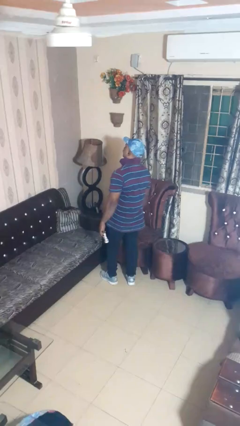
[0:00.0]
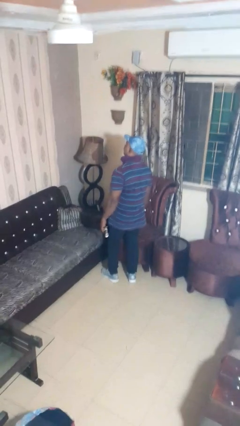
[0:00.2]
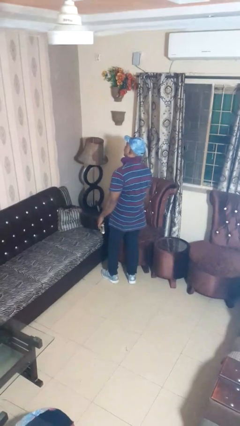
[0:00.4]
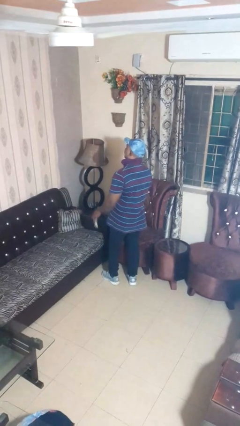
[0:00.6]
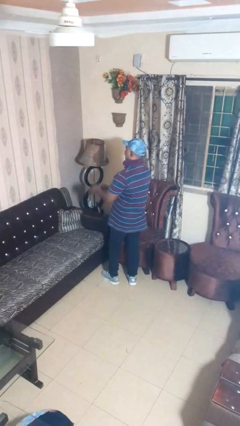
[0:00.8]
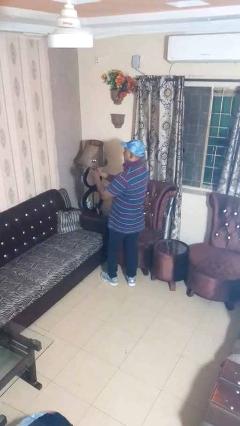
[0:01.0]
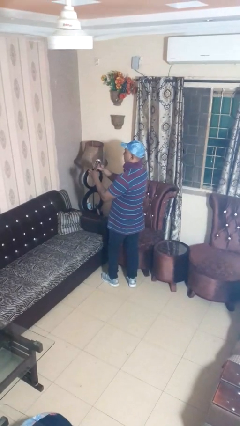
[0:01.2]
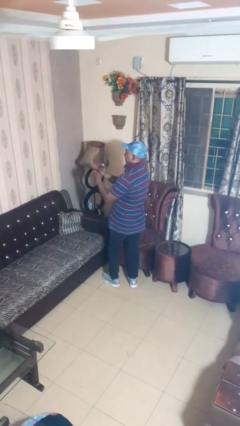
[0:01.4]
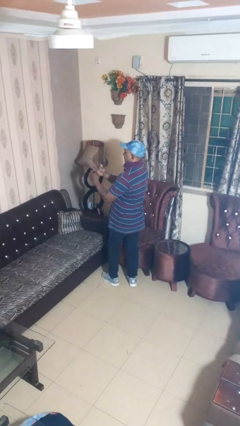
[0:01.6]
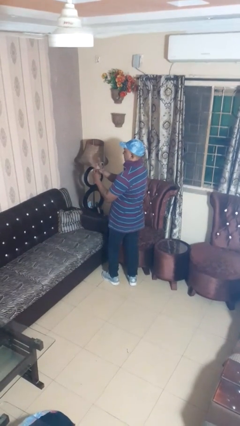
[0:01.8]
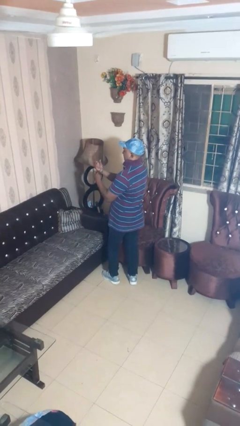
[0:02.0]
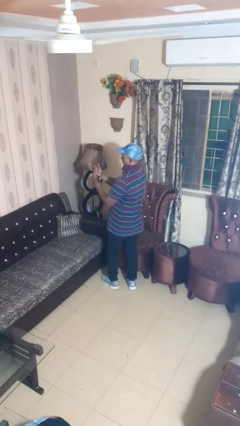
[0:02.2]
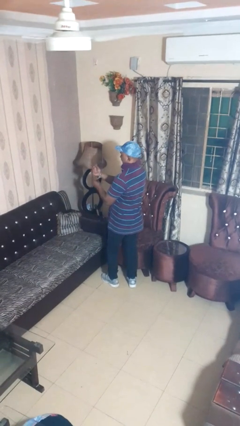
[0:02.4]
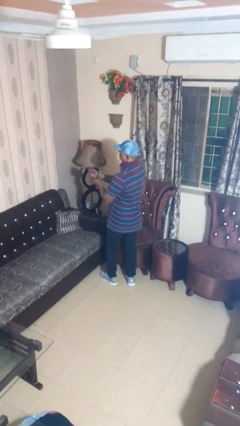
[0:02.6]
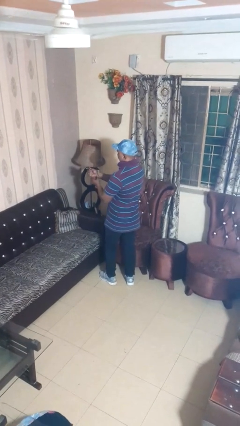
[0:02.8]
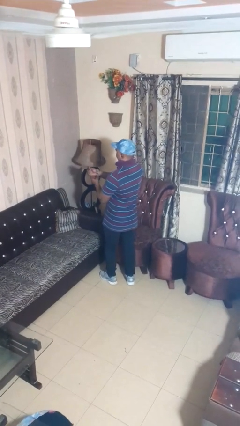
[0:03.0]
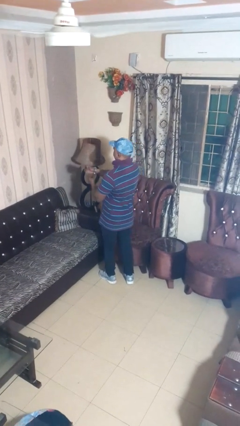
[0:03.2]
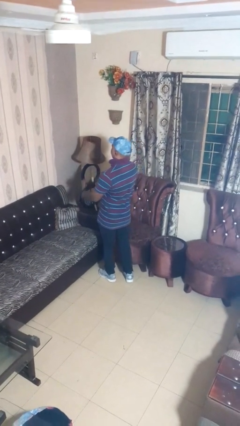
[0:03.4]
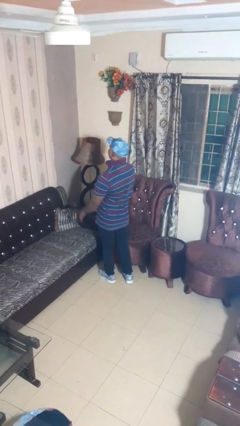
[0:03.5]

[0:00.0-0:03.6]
person puts on wristwatch

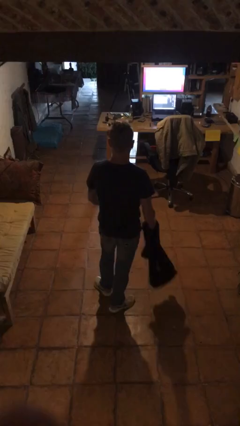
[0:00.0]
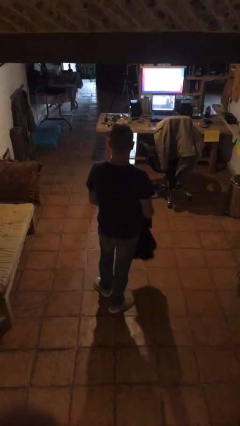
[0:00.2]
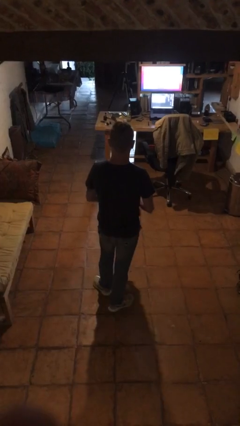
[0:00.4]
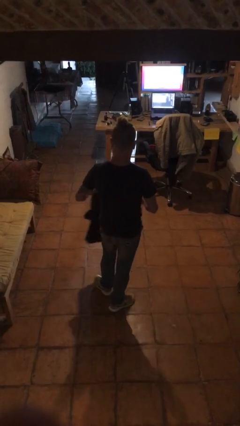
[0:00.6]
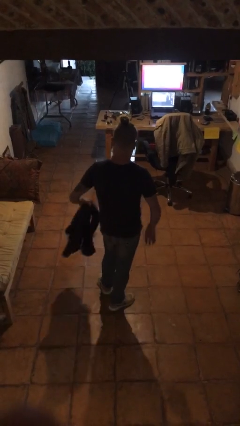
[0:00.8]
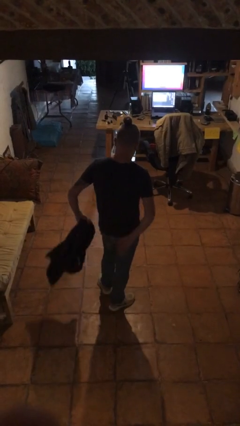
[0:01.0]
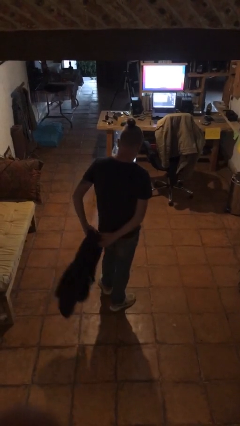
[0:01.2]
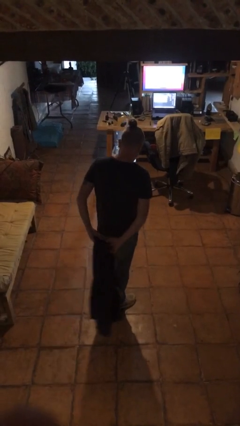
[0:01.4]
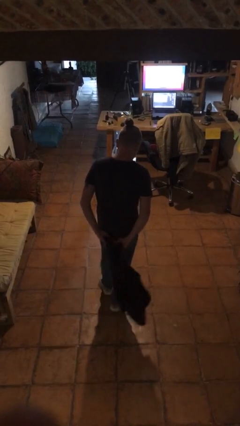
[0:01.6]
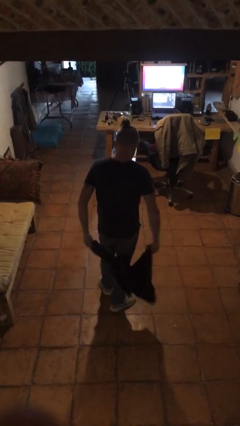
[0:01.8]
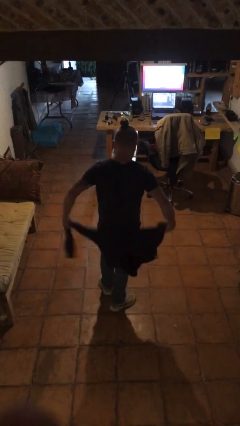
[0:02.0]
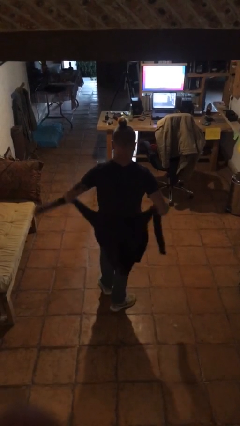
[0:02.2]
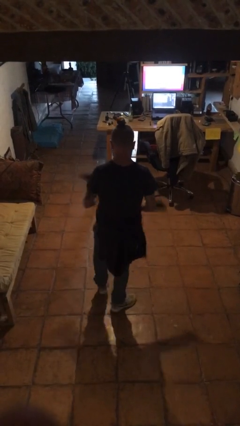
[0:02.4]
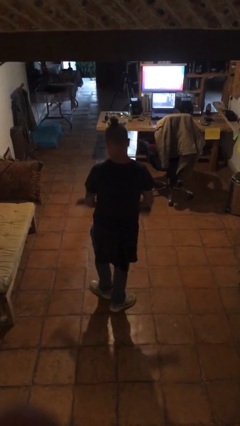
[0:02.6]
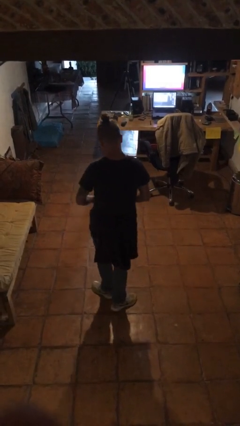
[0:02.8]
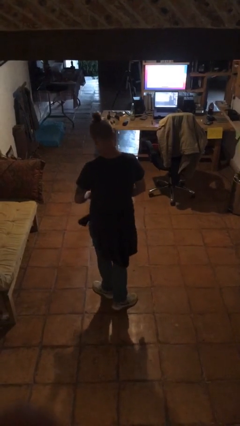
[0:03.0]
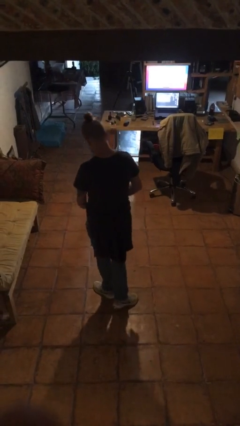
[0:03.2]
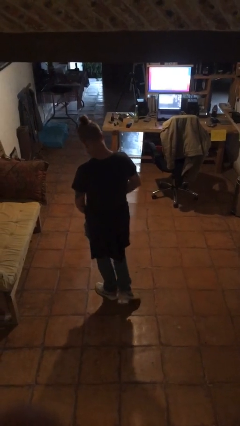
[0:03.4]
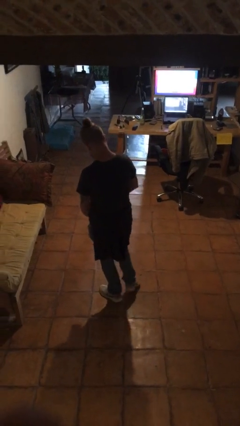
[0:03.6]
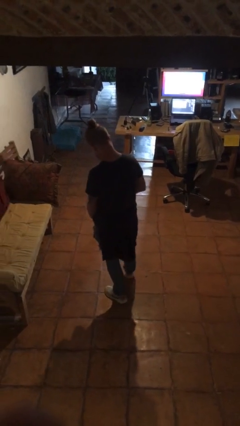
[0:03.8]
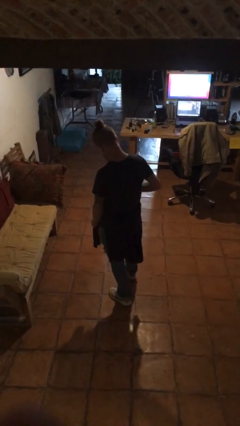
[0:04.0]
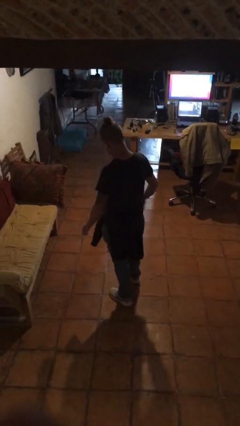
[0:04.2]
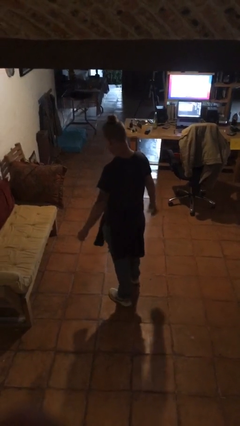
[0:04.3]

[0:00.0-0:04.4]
person ties jacket around waist

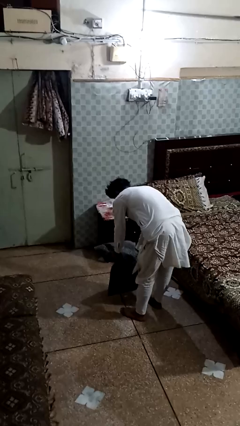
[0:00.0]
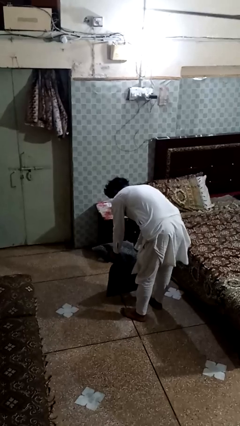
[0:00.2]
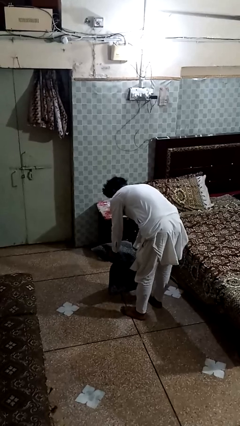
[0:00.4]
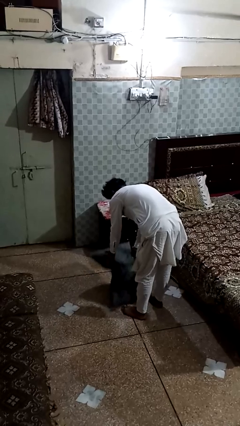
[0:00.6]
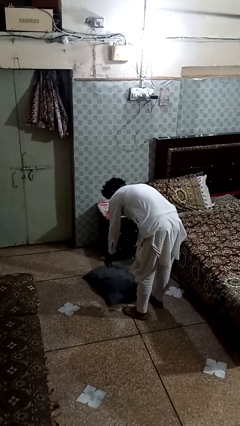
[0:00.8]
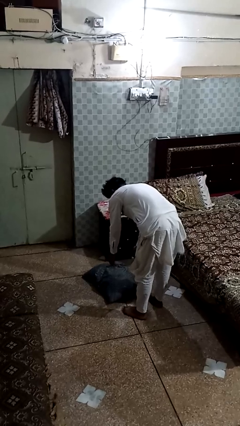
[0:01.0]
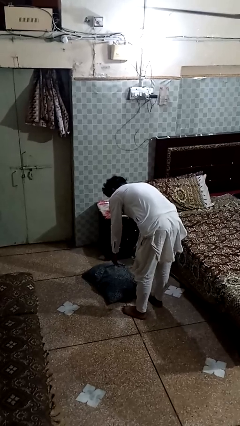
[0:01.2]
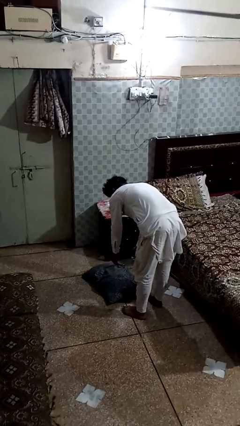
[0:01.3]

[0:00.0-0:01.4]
person catches dropped object

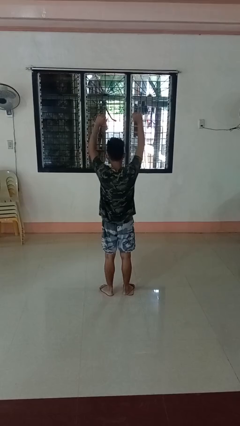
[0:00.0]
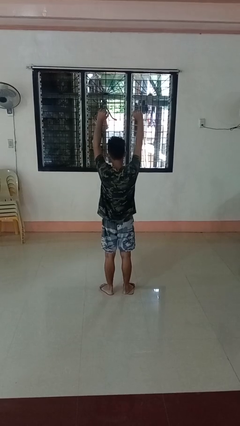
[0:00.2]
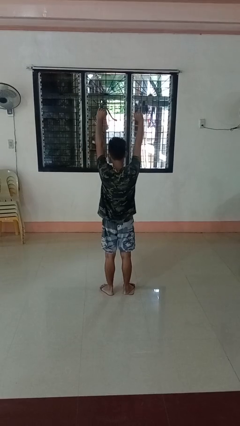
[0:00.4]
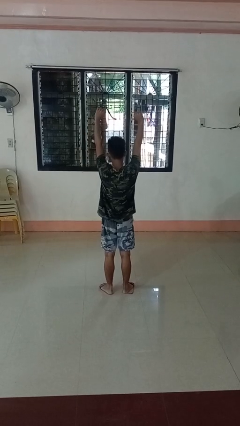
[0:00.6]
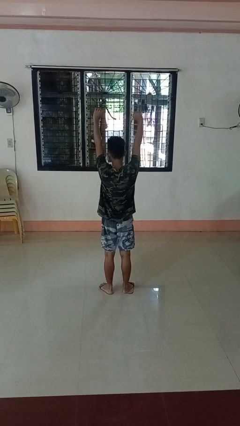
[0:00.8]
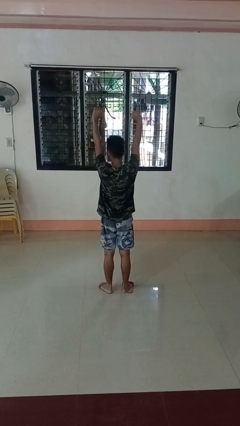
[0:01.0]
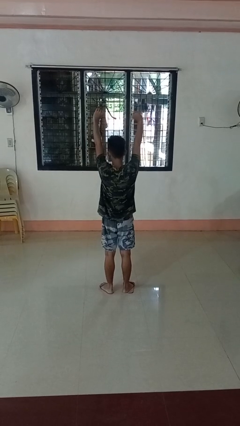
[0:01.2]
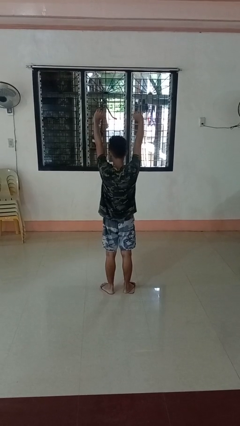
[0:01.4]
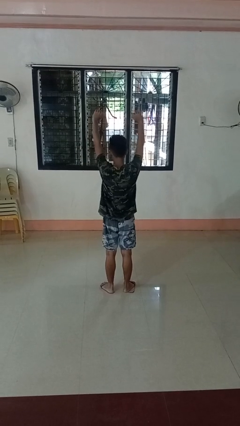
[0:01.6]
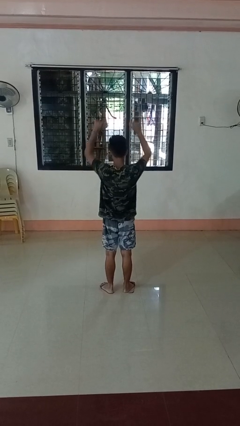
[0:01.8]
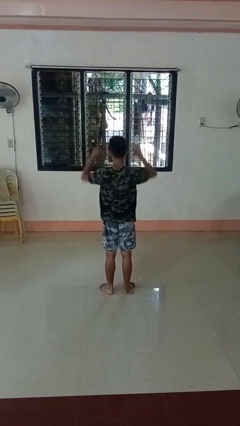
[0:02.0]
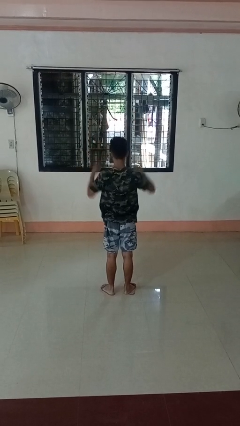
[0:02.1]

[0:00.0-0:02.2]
person stretches arms over head

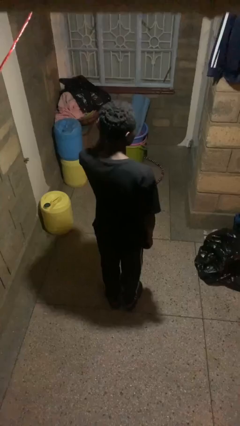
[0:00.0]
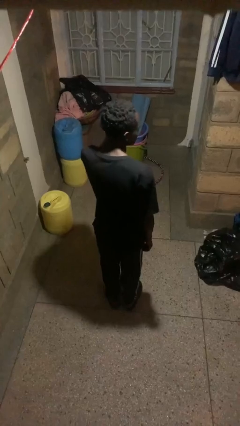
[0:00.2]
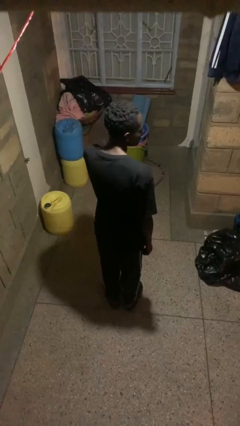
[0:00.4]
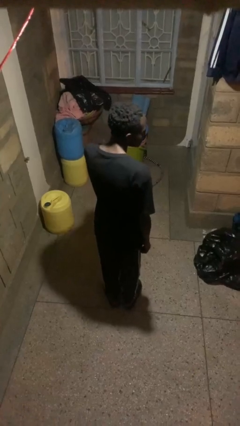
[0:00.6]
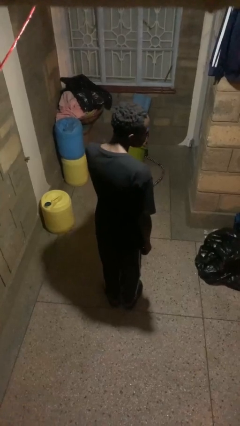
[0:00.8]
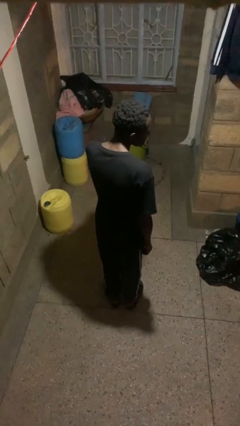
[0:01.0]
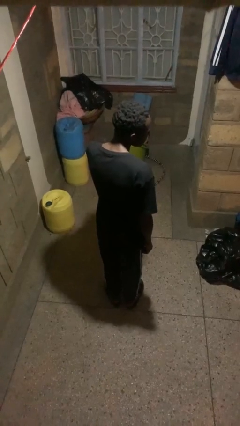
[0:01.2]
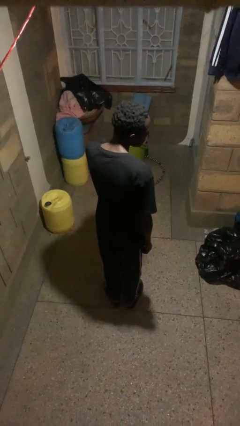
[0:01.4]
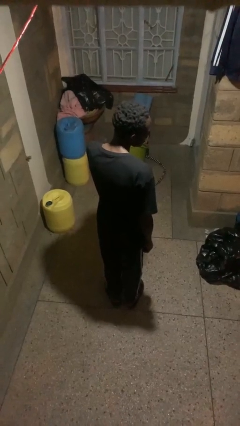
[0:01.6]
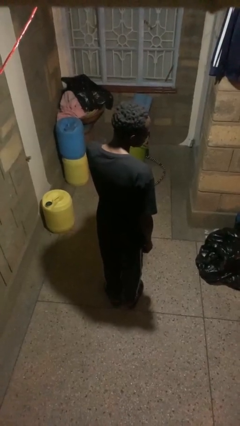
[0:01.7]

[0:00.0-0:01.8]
person touches earlobe

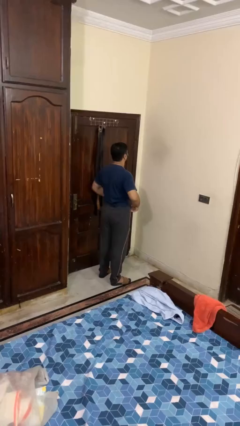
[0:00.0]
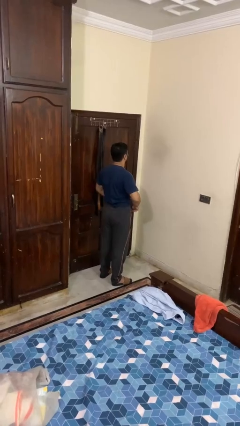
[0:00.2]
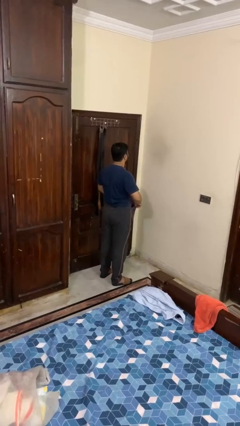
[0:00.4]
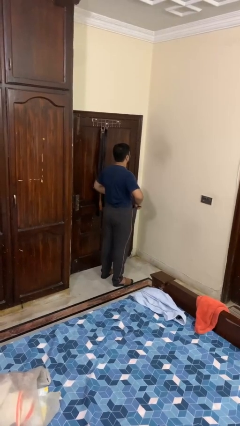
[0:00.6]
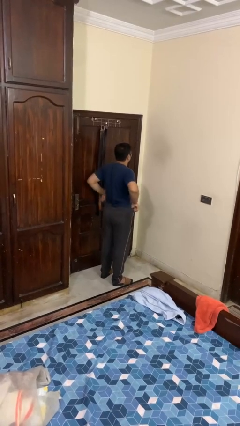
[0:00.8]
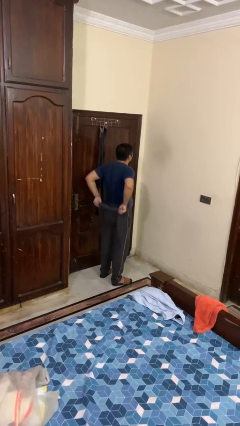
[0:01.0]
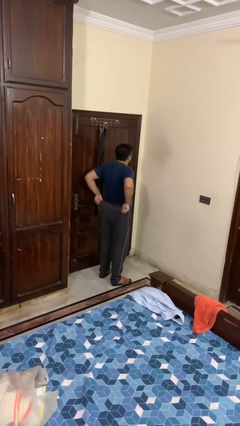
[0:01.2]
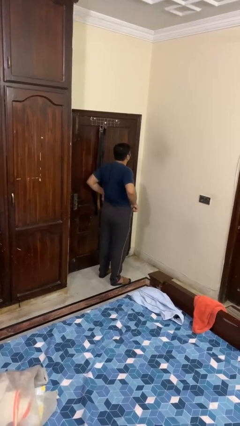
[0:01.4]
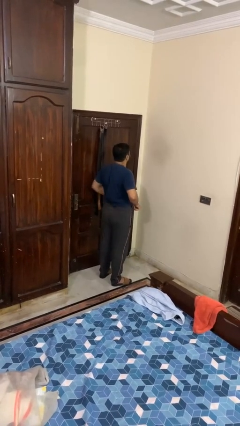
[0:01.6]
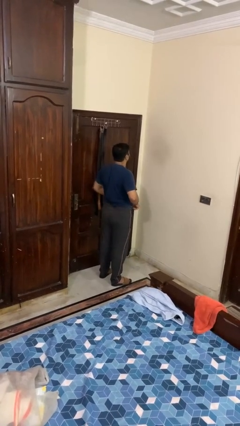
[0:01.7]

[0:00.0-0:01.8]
person hikes up pants

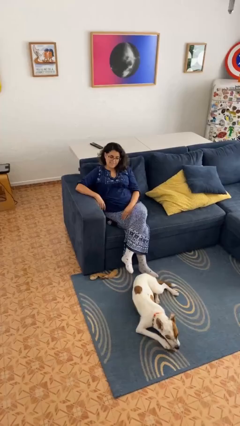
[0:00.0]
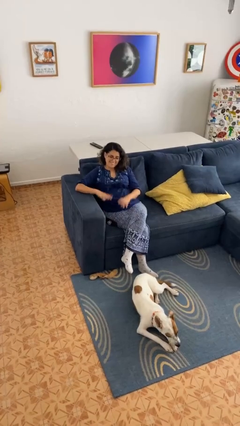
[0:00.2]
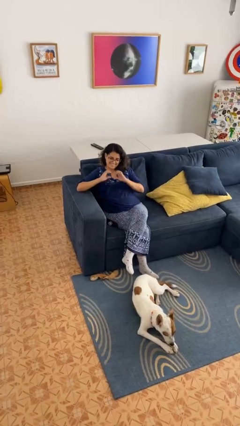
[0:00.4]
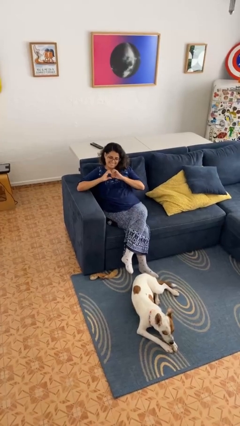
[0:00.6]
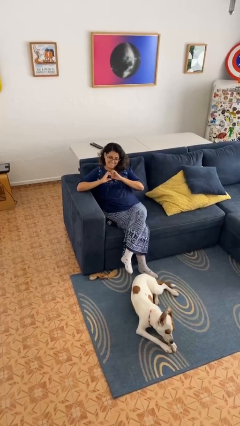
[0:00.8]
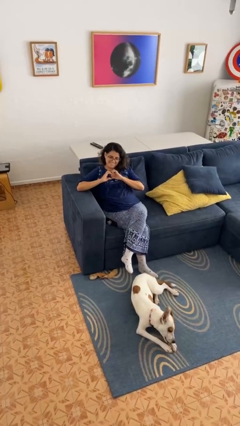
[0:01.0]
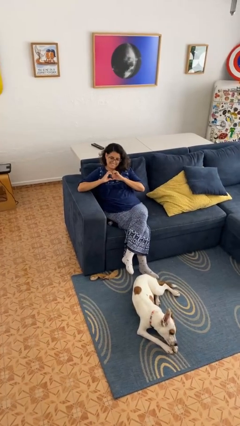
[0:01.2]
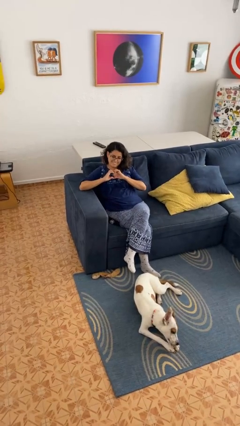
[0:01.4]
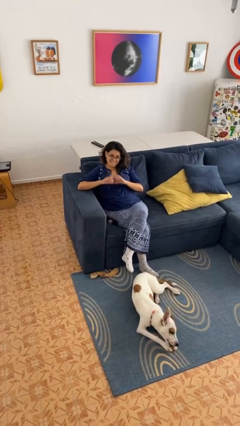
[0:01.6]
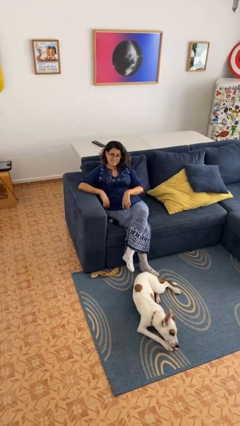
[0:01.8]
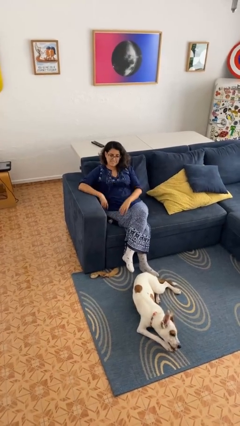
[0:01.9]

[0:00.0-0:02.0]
person gestures heart
